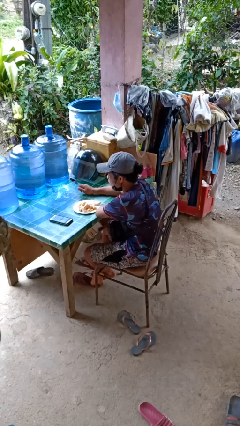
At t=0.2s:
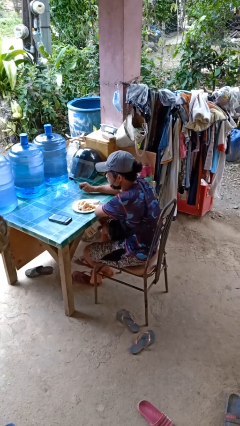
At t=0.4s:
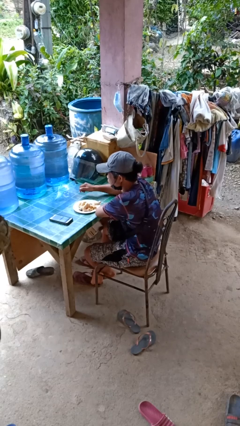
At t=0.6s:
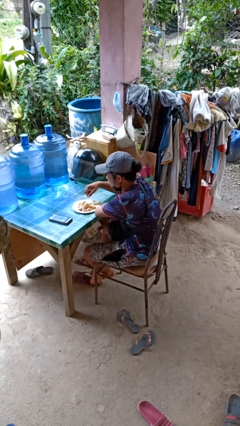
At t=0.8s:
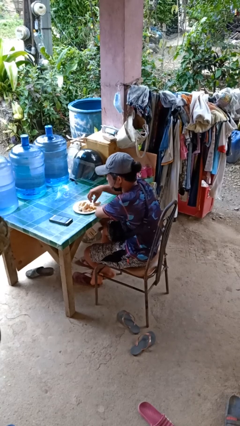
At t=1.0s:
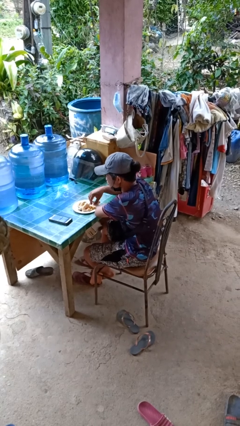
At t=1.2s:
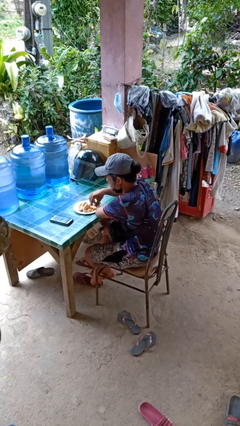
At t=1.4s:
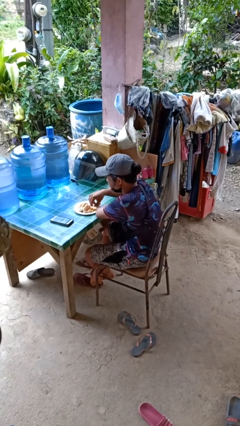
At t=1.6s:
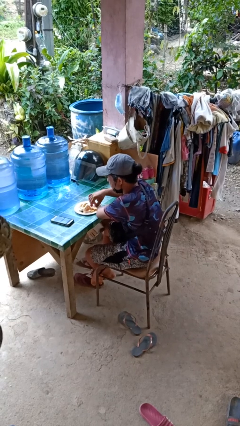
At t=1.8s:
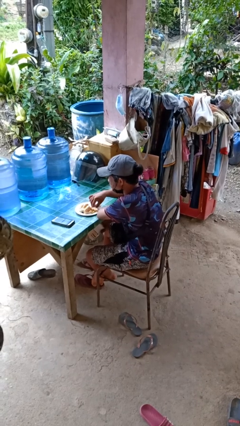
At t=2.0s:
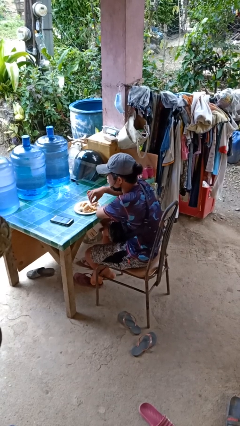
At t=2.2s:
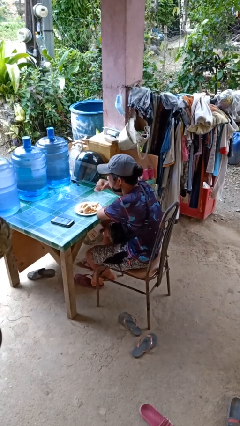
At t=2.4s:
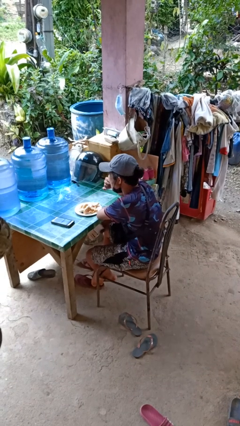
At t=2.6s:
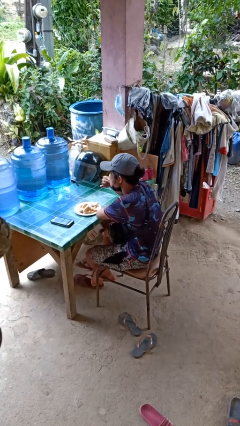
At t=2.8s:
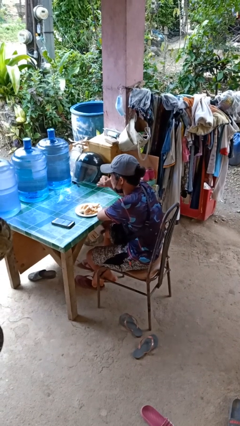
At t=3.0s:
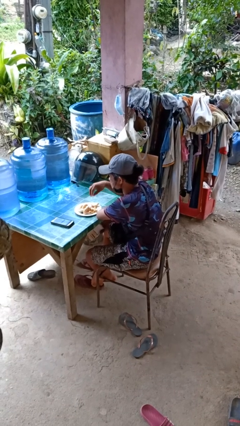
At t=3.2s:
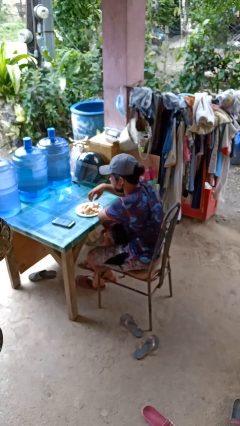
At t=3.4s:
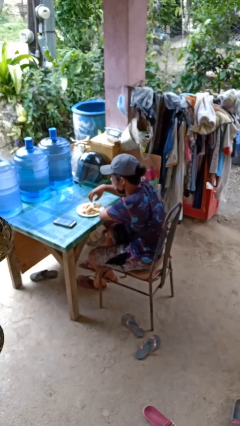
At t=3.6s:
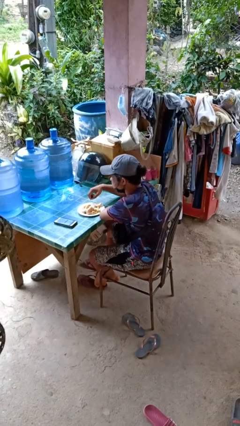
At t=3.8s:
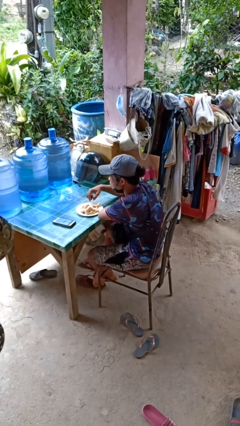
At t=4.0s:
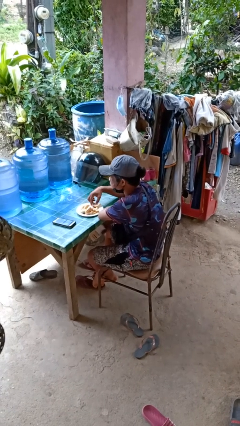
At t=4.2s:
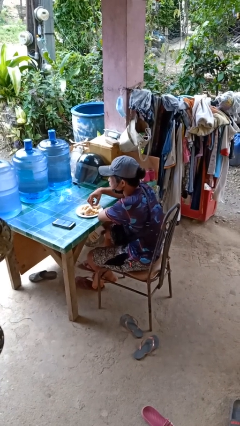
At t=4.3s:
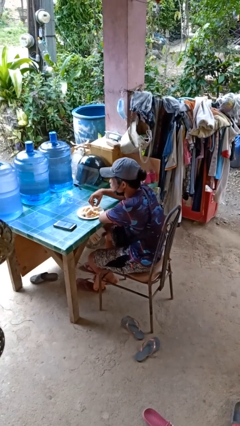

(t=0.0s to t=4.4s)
person eats with hands

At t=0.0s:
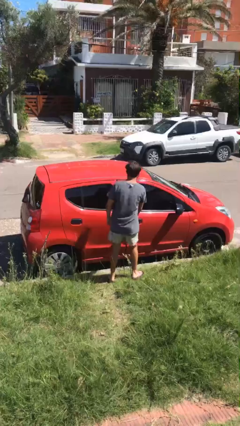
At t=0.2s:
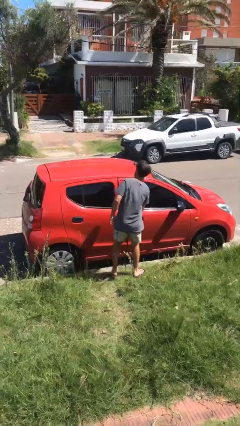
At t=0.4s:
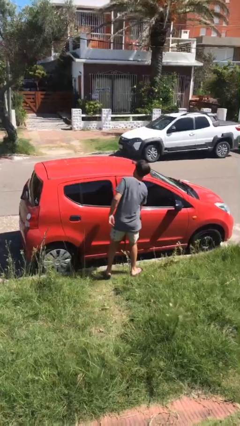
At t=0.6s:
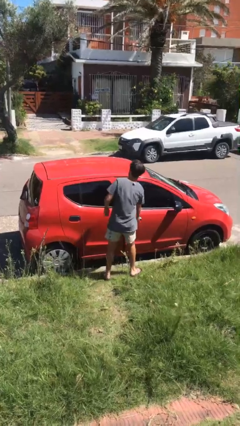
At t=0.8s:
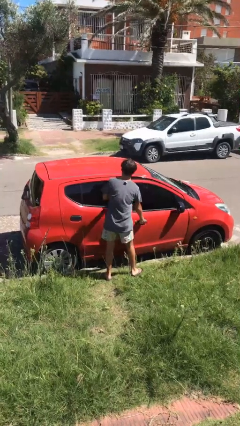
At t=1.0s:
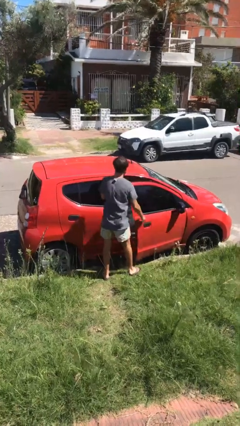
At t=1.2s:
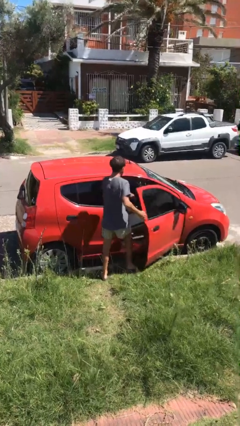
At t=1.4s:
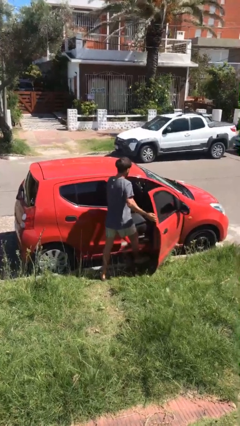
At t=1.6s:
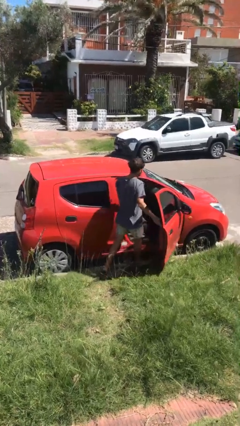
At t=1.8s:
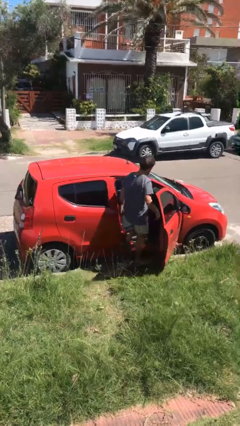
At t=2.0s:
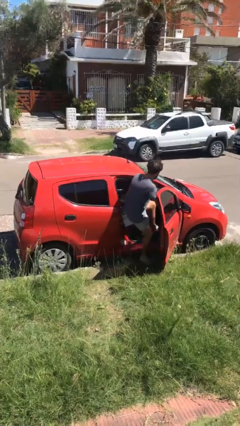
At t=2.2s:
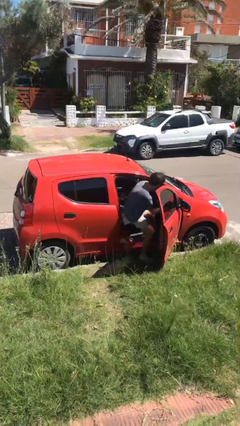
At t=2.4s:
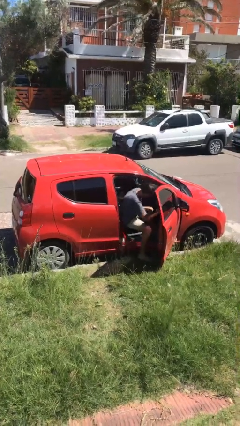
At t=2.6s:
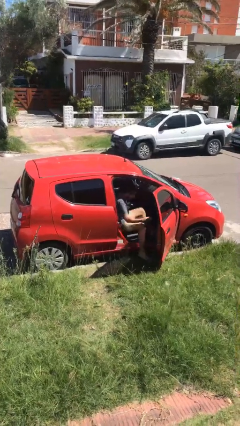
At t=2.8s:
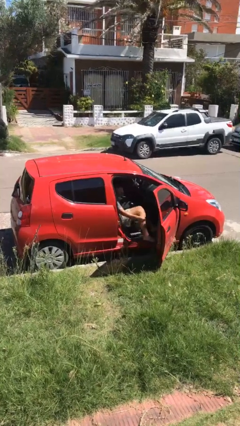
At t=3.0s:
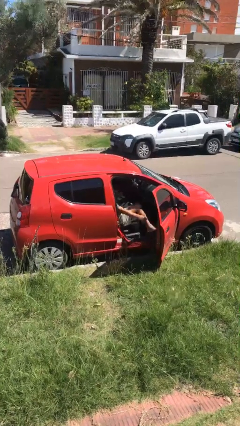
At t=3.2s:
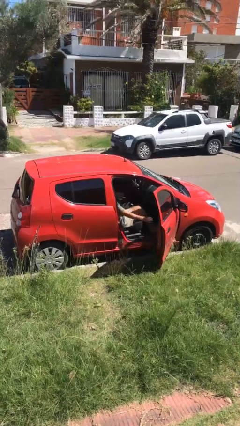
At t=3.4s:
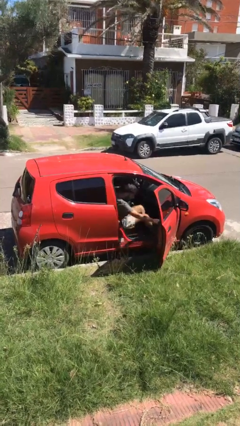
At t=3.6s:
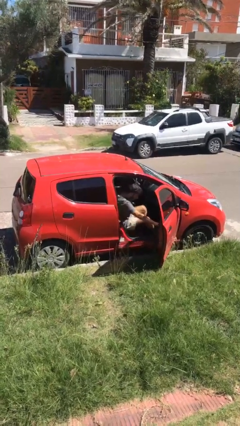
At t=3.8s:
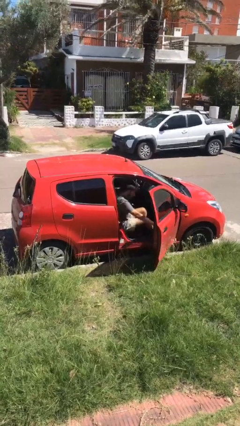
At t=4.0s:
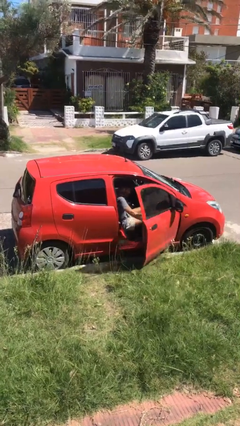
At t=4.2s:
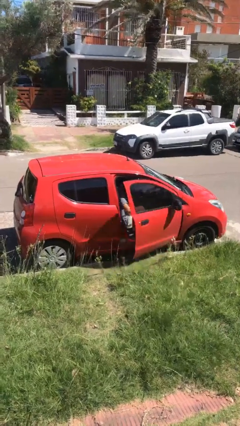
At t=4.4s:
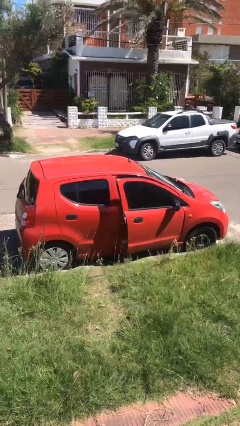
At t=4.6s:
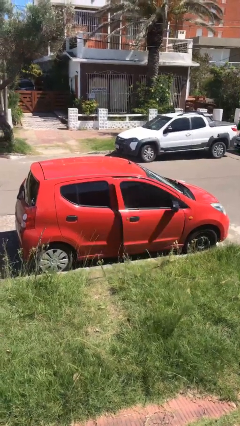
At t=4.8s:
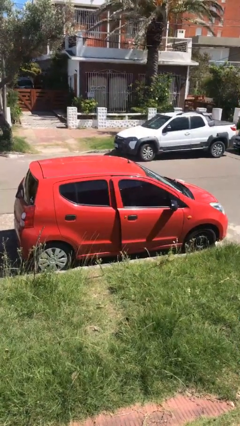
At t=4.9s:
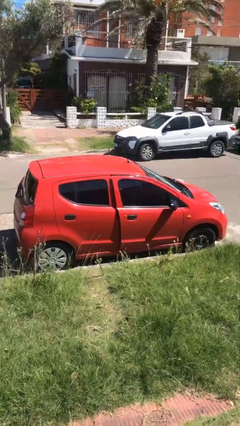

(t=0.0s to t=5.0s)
car picks up person

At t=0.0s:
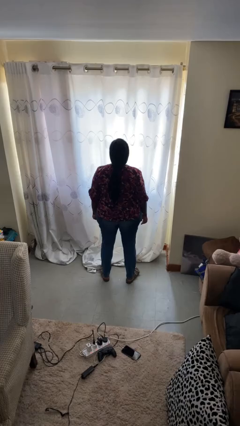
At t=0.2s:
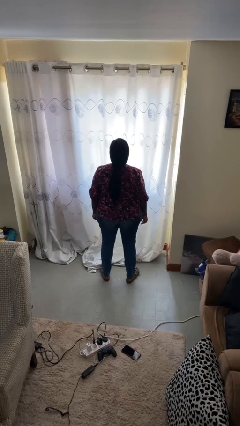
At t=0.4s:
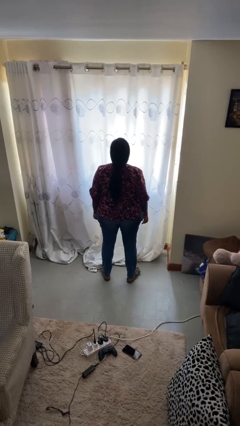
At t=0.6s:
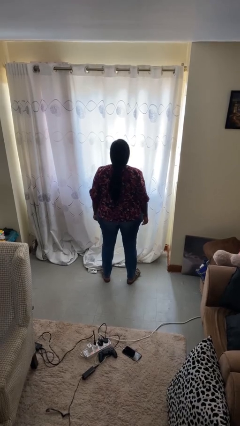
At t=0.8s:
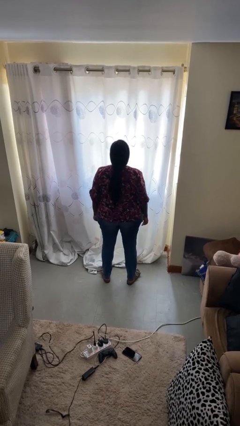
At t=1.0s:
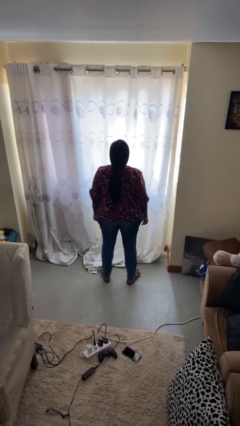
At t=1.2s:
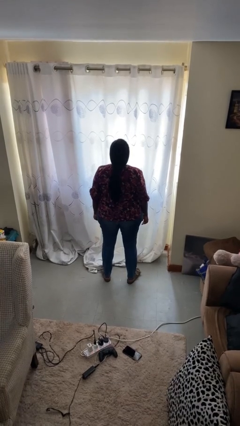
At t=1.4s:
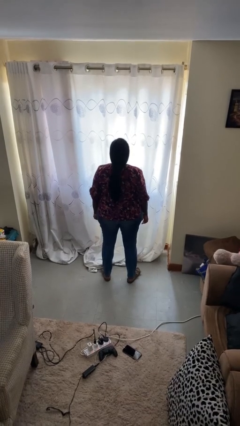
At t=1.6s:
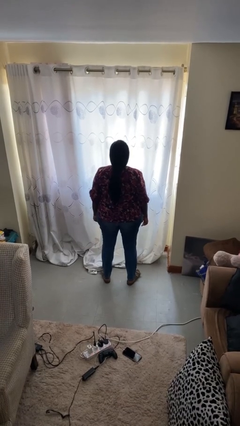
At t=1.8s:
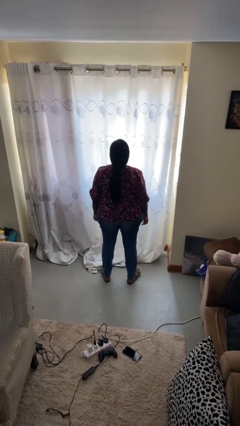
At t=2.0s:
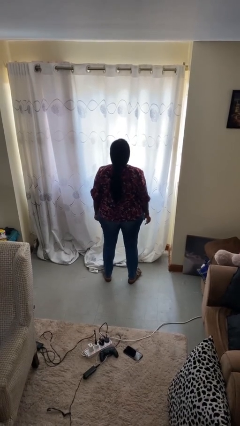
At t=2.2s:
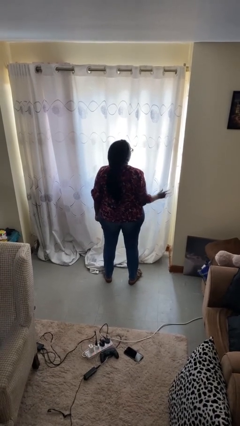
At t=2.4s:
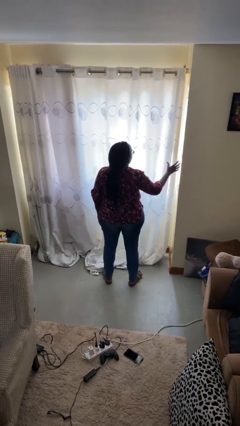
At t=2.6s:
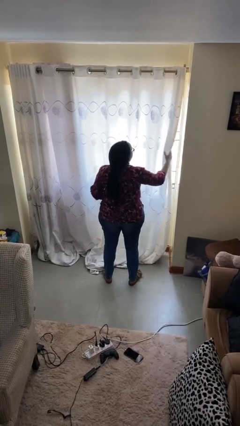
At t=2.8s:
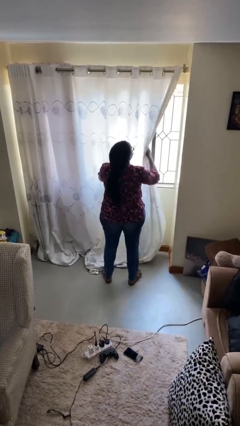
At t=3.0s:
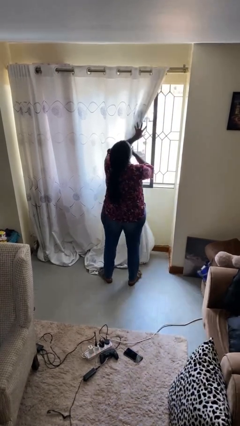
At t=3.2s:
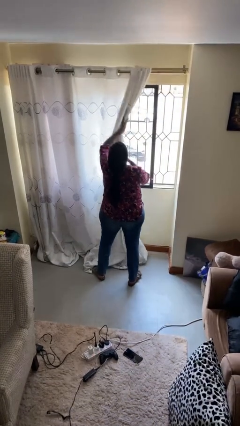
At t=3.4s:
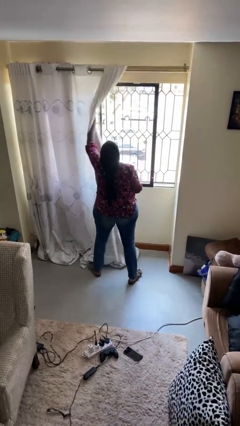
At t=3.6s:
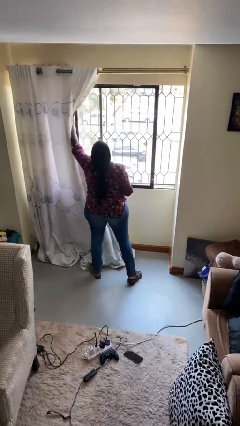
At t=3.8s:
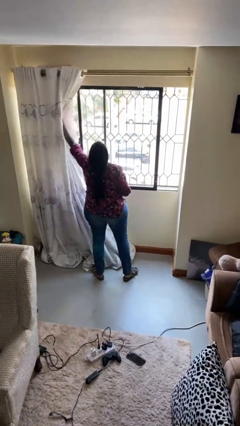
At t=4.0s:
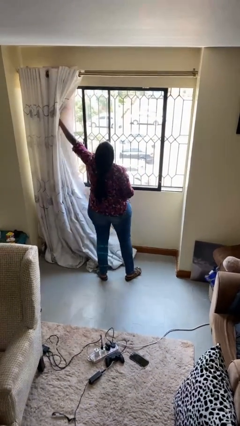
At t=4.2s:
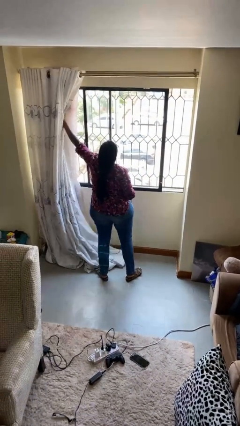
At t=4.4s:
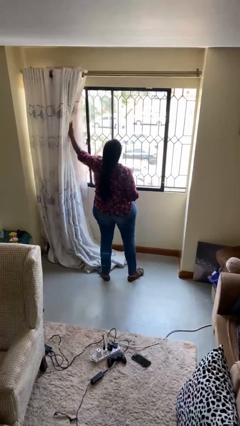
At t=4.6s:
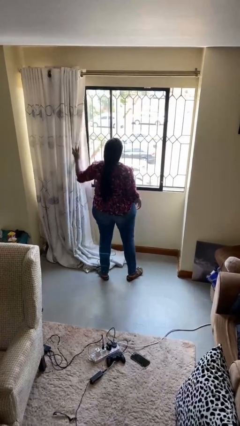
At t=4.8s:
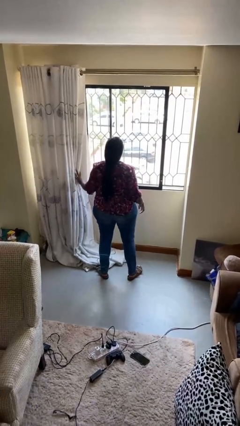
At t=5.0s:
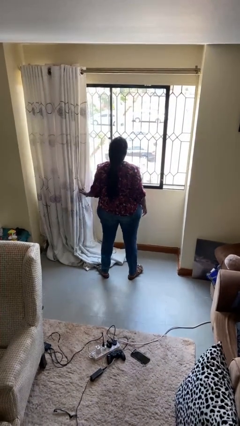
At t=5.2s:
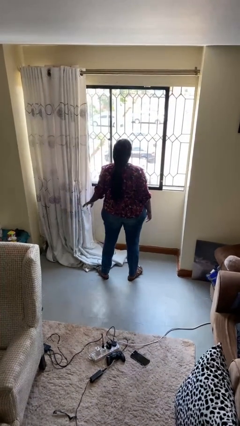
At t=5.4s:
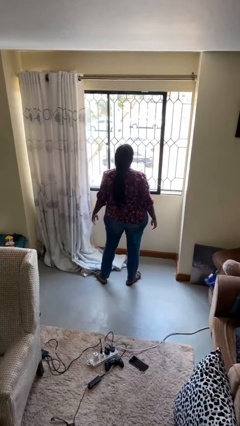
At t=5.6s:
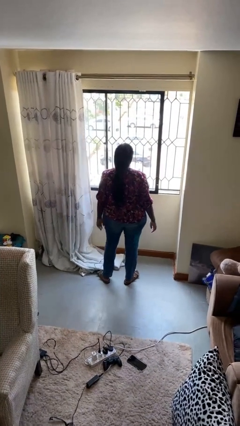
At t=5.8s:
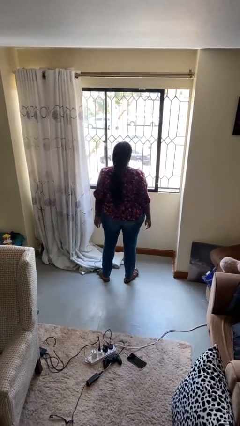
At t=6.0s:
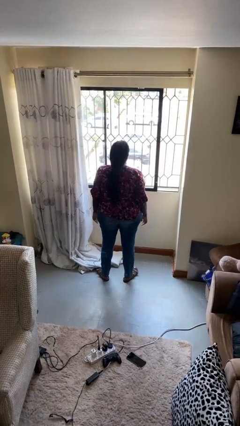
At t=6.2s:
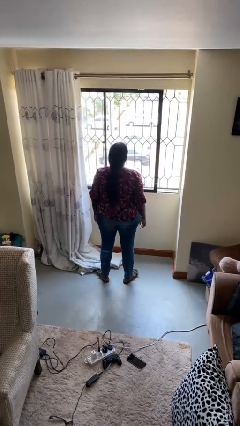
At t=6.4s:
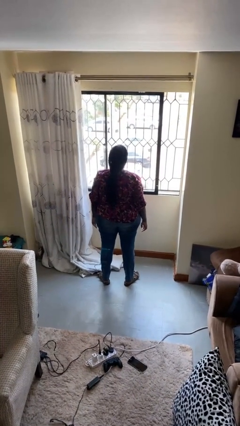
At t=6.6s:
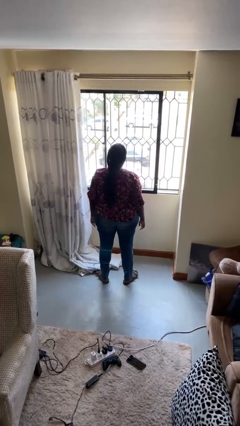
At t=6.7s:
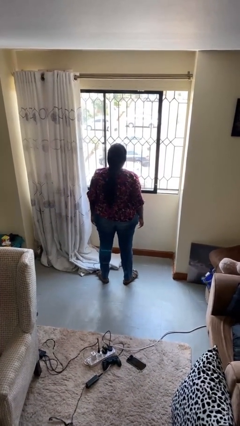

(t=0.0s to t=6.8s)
person opens curtains

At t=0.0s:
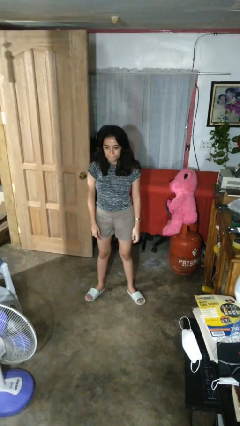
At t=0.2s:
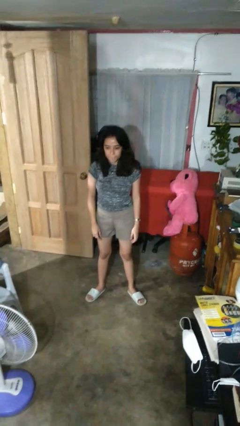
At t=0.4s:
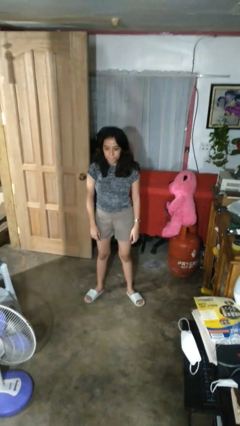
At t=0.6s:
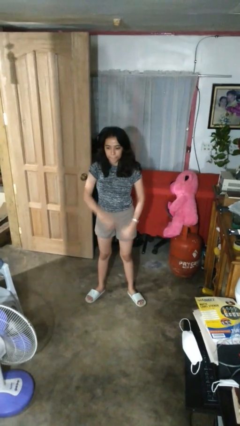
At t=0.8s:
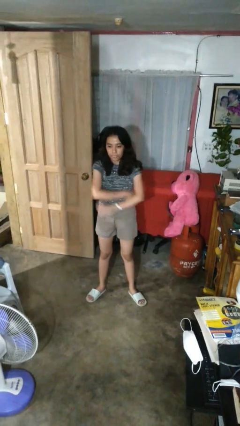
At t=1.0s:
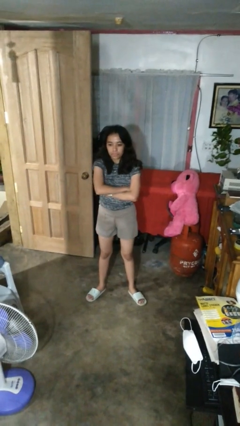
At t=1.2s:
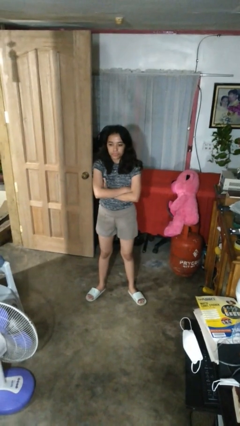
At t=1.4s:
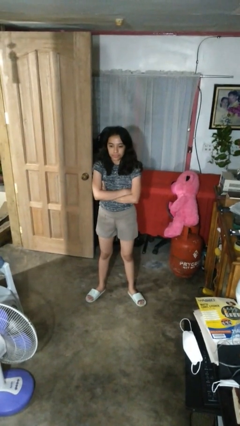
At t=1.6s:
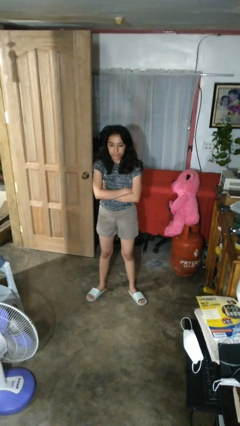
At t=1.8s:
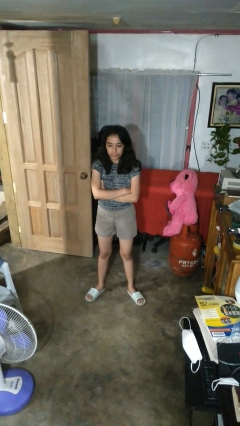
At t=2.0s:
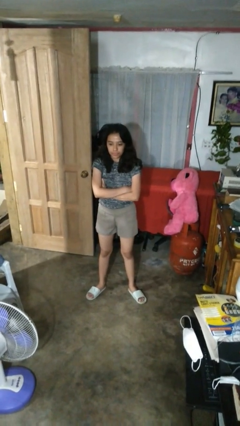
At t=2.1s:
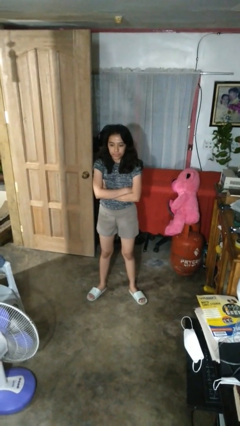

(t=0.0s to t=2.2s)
person crosses arms
